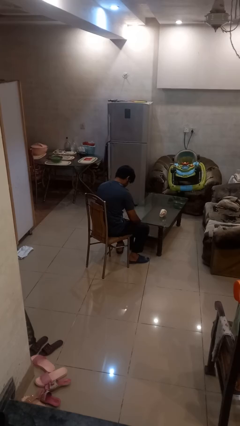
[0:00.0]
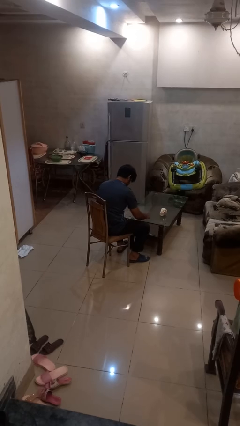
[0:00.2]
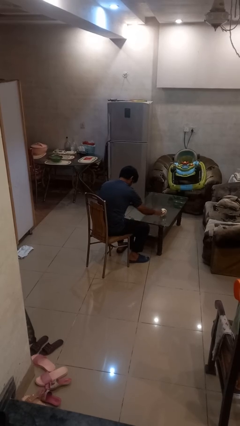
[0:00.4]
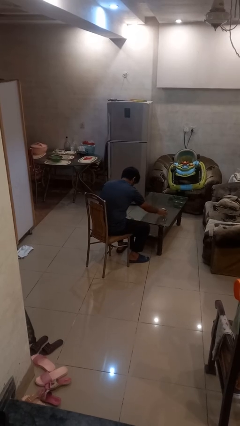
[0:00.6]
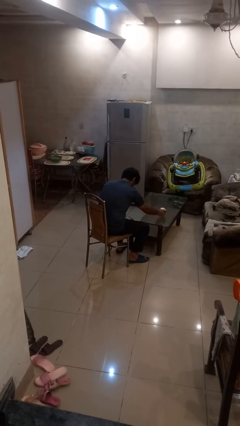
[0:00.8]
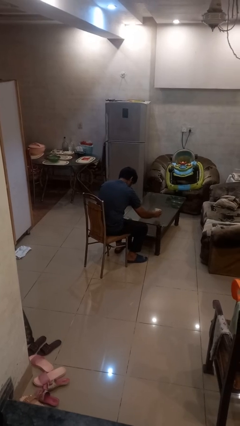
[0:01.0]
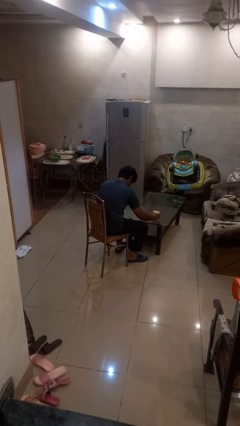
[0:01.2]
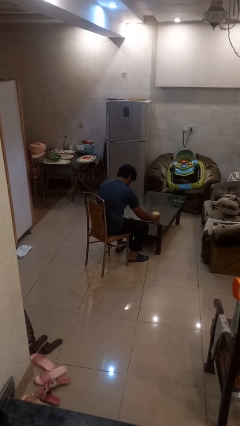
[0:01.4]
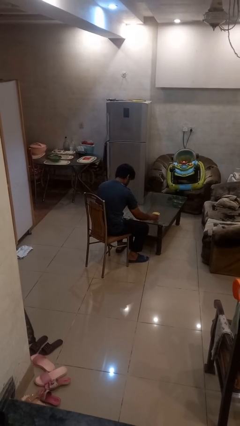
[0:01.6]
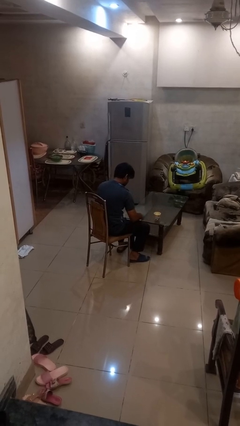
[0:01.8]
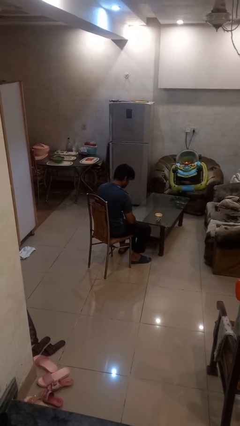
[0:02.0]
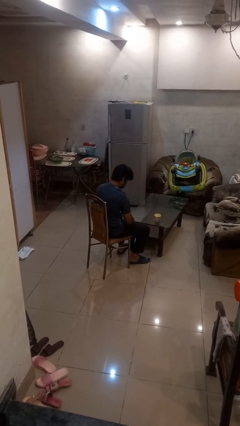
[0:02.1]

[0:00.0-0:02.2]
person sets upright glass

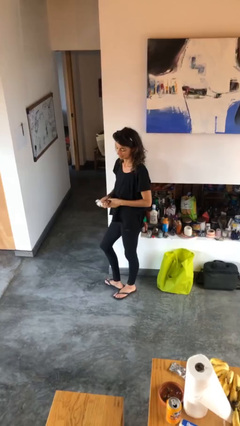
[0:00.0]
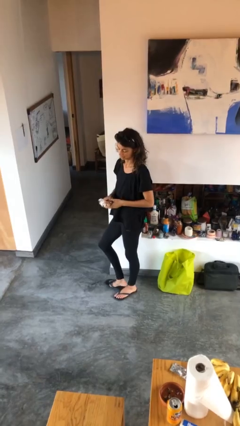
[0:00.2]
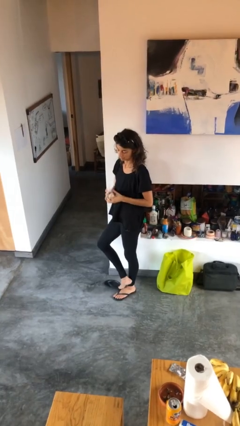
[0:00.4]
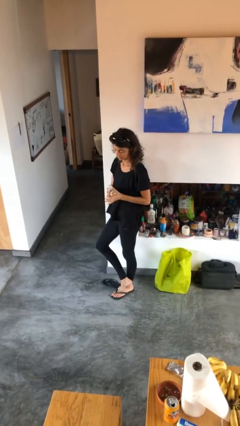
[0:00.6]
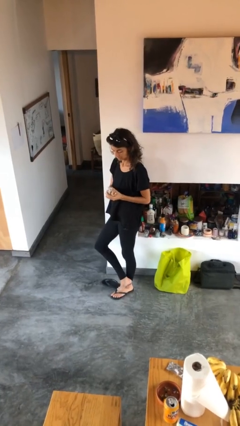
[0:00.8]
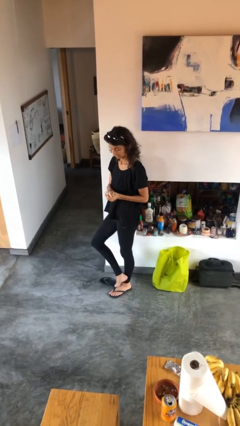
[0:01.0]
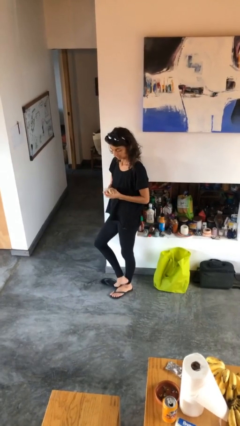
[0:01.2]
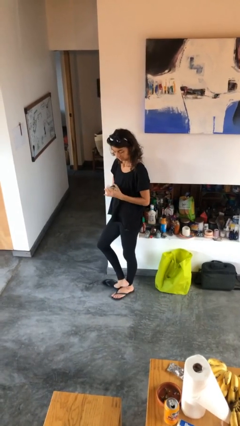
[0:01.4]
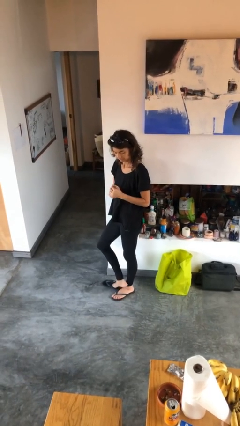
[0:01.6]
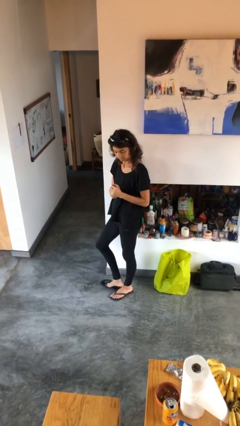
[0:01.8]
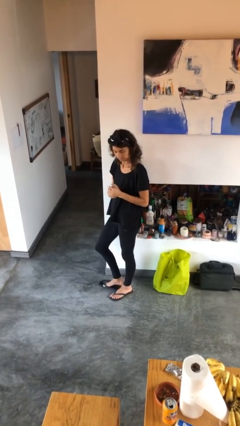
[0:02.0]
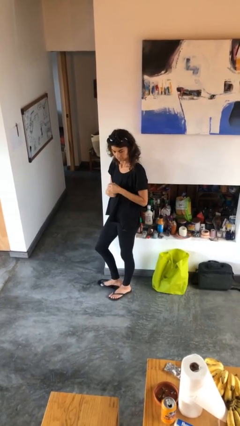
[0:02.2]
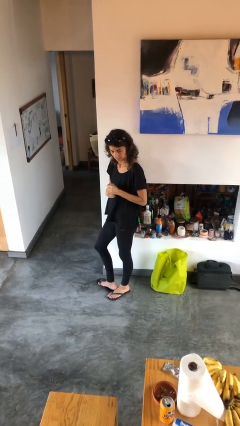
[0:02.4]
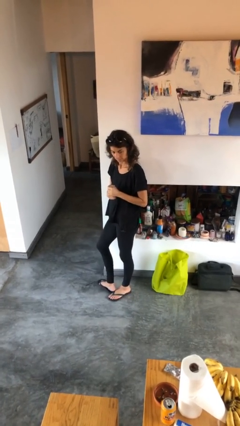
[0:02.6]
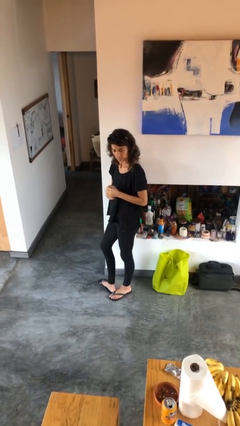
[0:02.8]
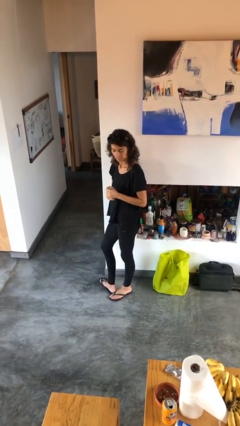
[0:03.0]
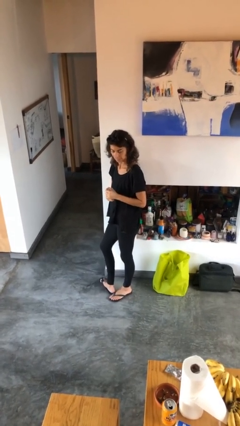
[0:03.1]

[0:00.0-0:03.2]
person squeezes object

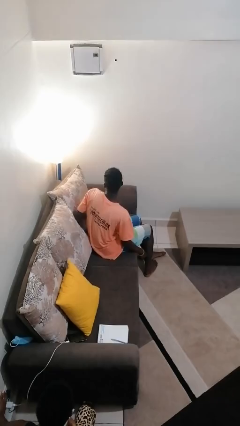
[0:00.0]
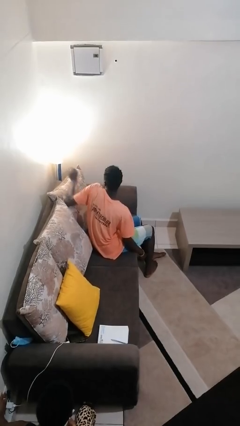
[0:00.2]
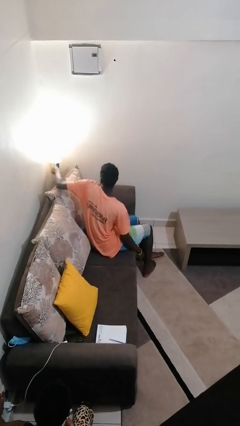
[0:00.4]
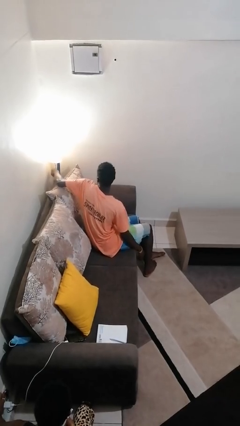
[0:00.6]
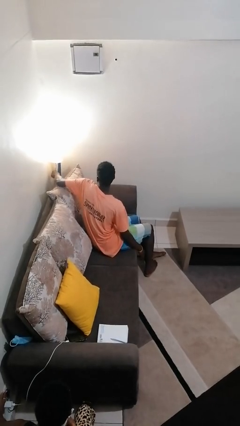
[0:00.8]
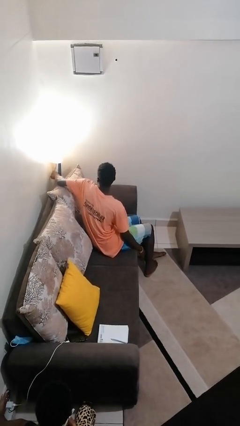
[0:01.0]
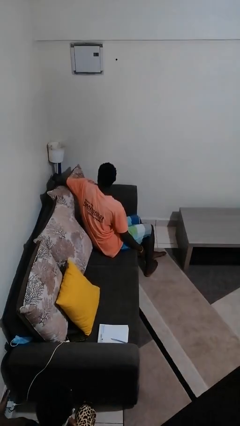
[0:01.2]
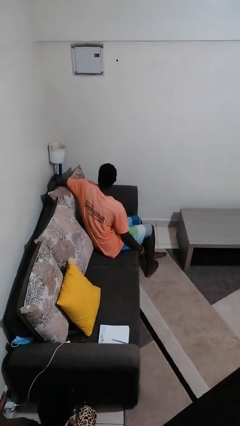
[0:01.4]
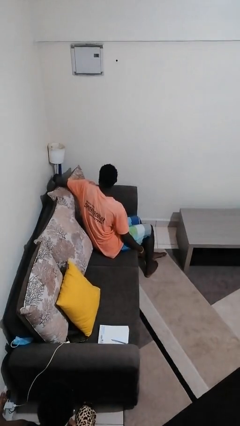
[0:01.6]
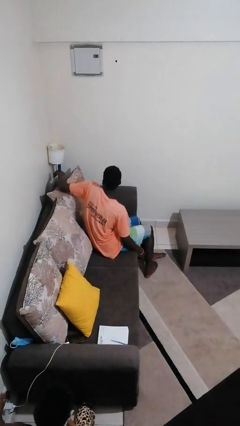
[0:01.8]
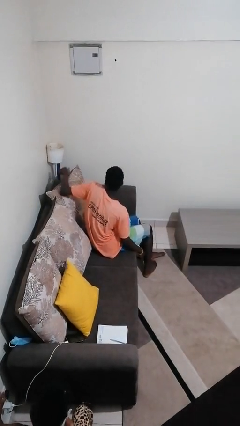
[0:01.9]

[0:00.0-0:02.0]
person turns off lamp

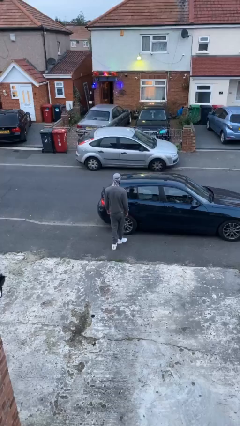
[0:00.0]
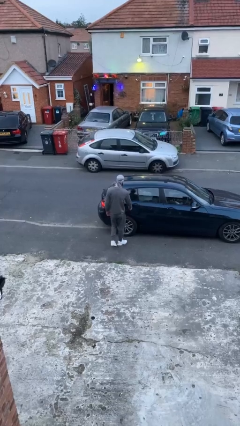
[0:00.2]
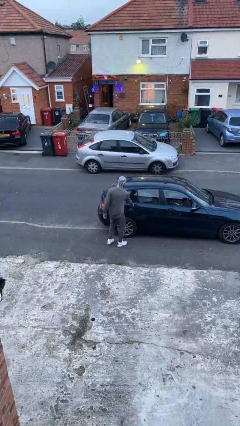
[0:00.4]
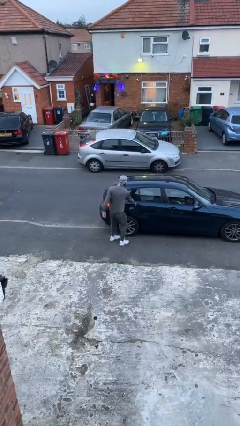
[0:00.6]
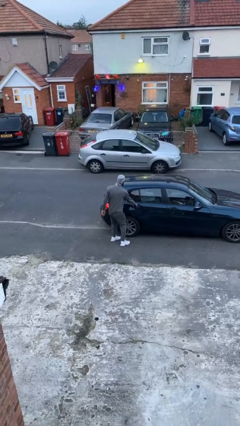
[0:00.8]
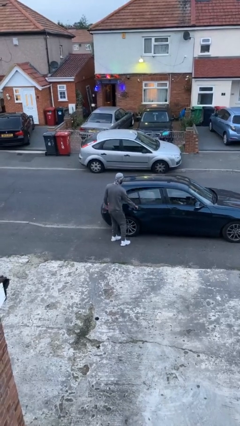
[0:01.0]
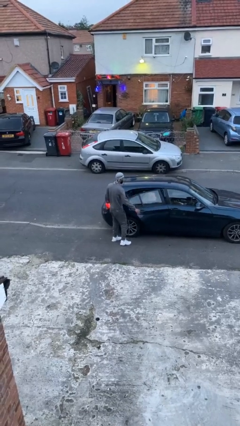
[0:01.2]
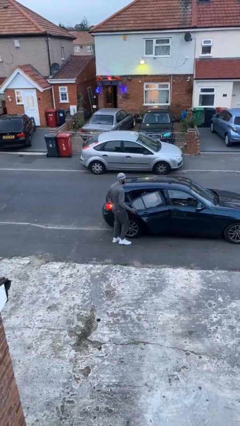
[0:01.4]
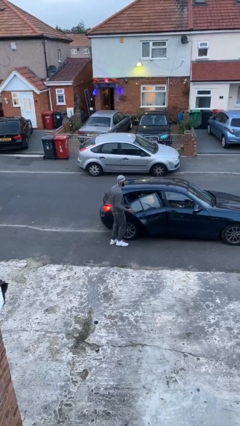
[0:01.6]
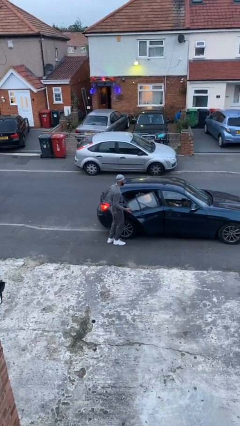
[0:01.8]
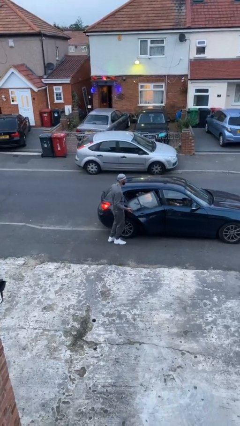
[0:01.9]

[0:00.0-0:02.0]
person opens car door

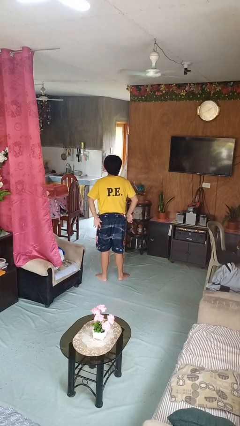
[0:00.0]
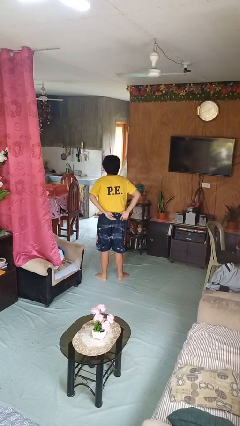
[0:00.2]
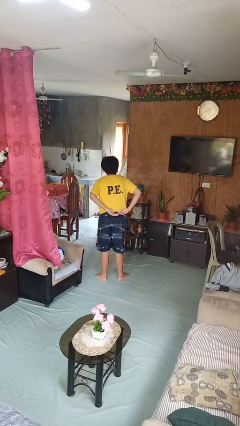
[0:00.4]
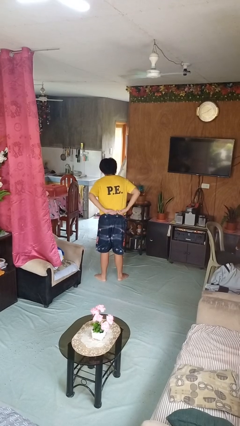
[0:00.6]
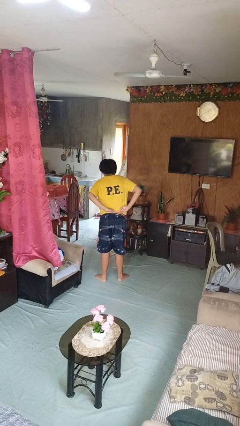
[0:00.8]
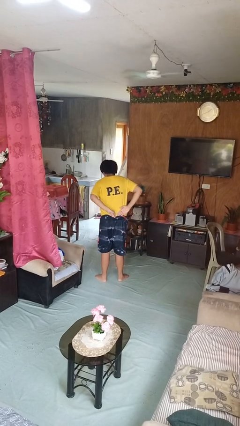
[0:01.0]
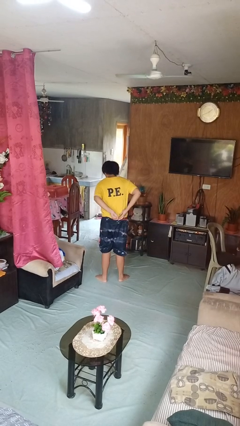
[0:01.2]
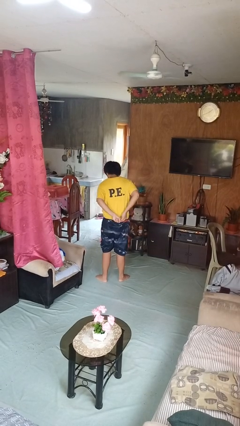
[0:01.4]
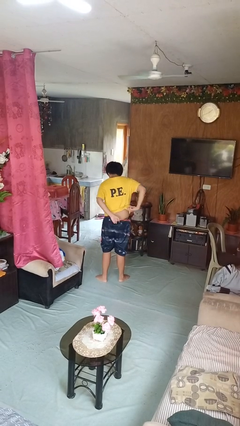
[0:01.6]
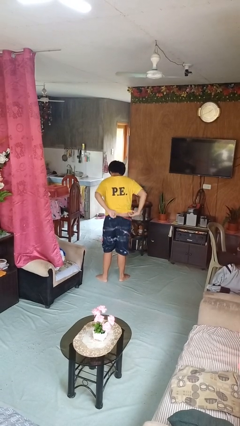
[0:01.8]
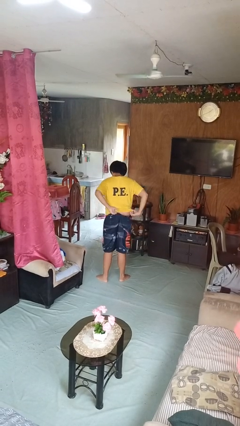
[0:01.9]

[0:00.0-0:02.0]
person untucks shirt

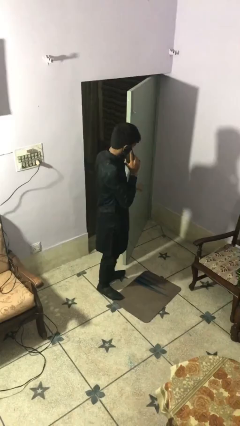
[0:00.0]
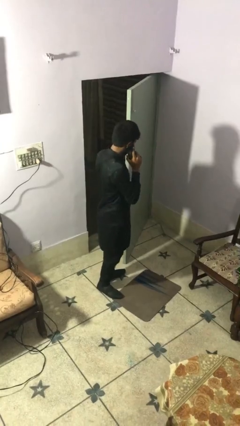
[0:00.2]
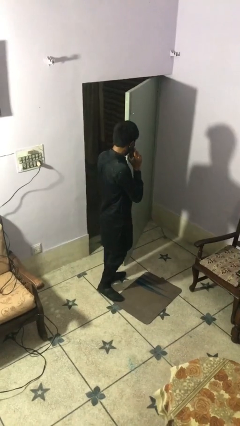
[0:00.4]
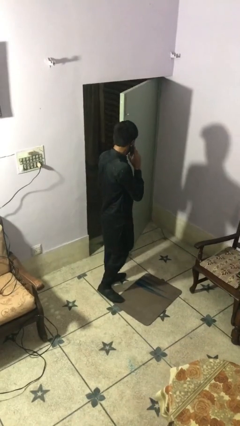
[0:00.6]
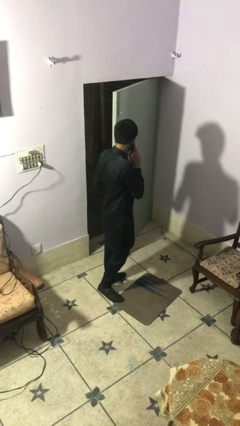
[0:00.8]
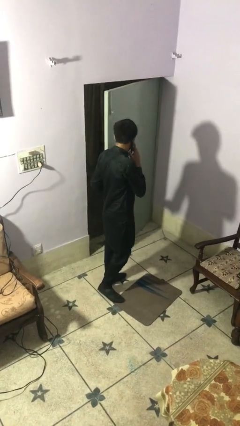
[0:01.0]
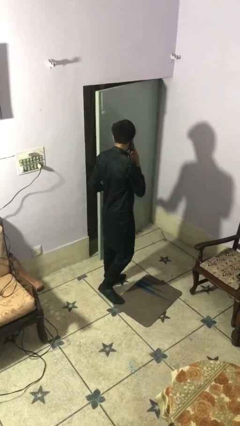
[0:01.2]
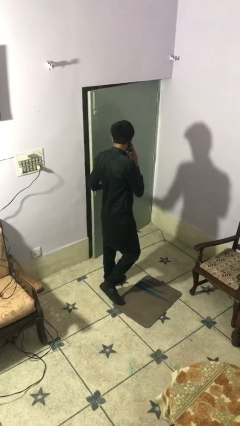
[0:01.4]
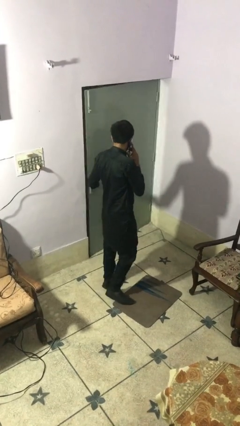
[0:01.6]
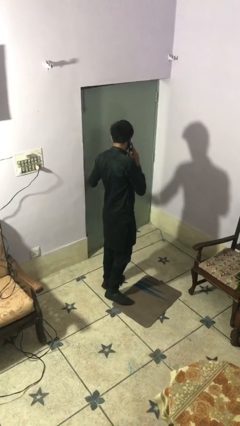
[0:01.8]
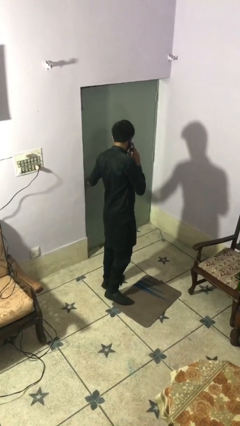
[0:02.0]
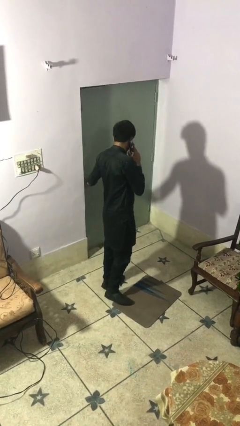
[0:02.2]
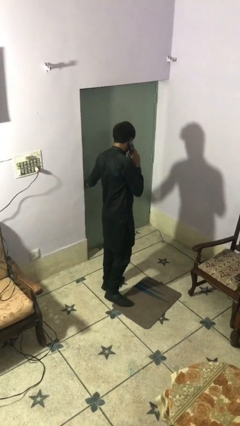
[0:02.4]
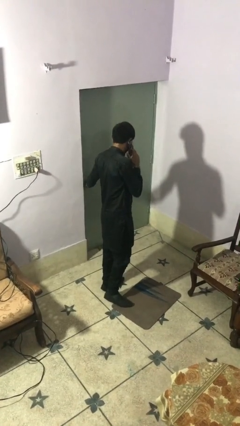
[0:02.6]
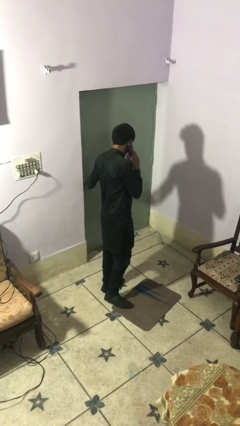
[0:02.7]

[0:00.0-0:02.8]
person closes facility door

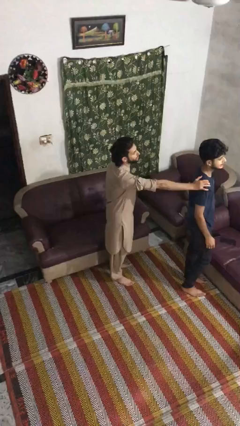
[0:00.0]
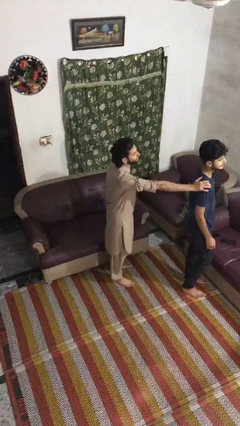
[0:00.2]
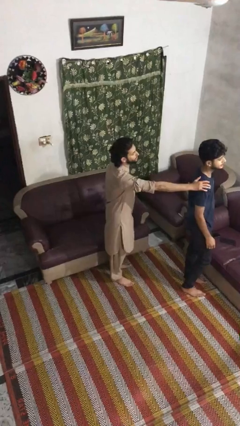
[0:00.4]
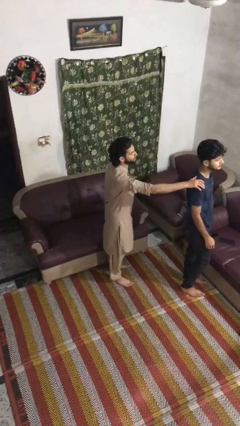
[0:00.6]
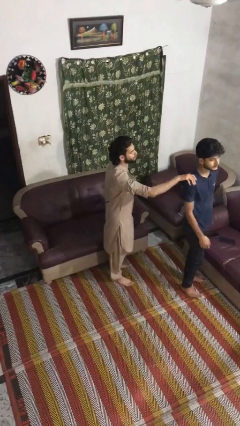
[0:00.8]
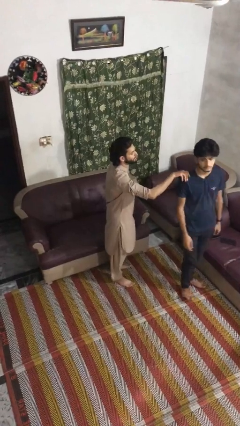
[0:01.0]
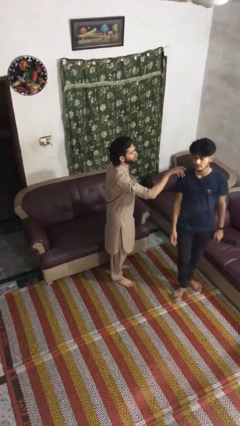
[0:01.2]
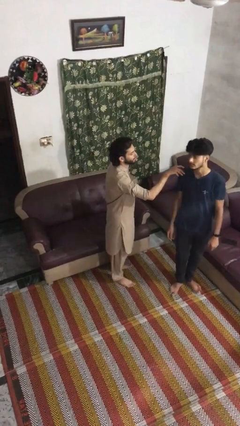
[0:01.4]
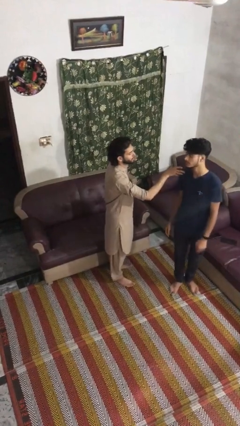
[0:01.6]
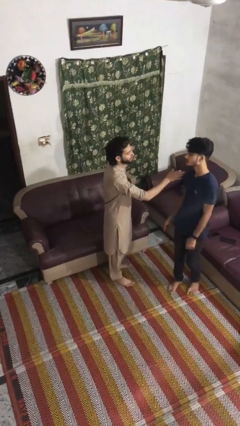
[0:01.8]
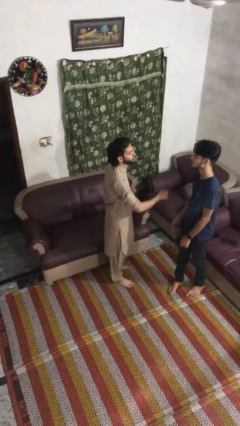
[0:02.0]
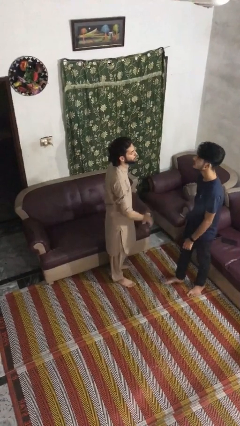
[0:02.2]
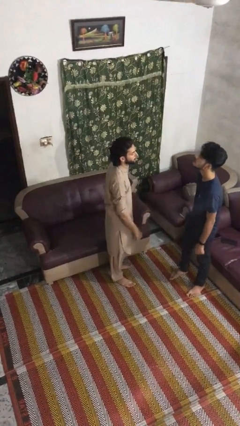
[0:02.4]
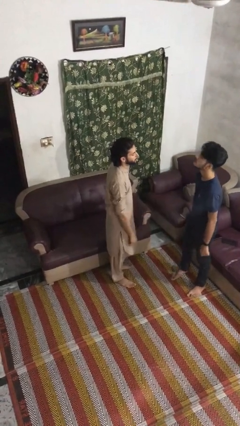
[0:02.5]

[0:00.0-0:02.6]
person spins person around
